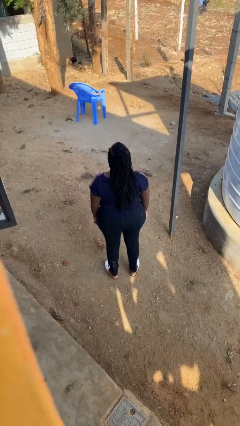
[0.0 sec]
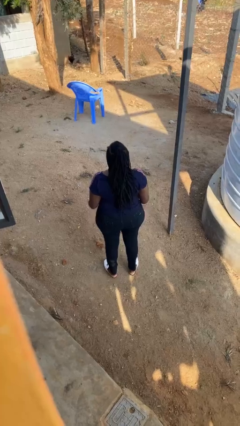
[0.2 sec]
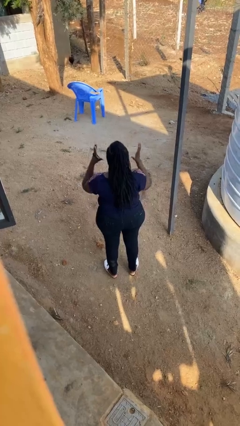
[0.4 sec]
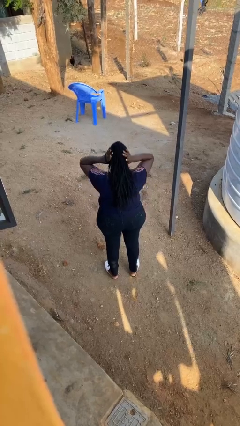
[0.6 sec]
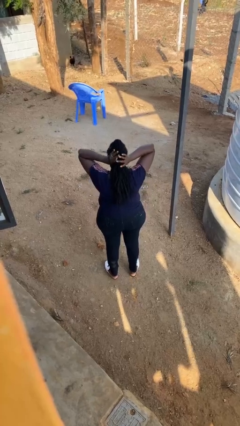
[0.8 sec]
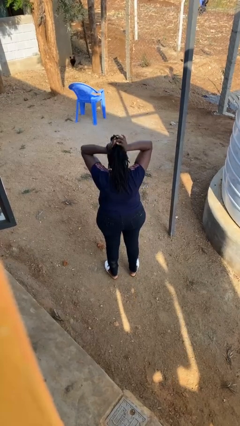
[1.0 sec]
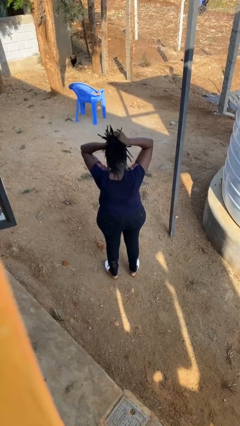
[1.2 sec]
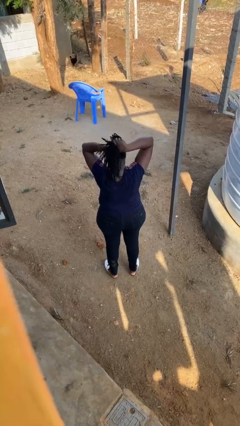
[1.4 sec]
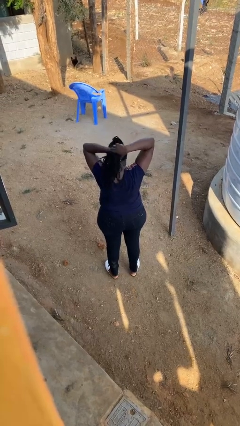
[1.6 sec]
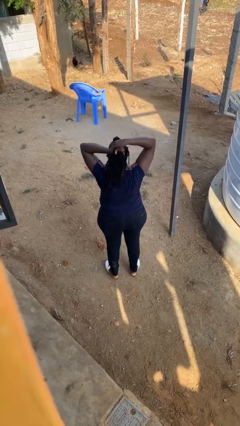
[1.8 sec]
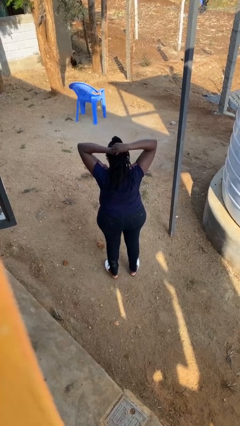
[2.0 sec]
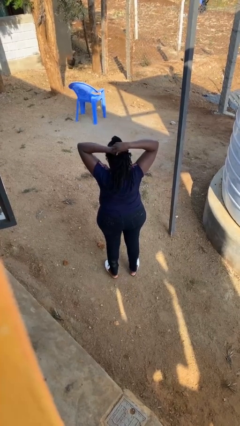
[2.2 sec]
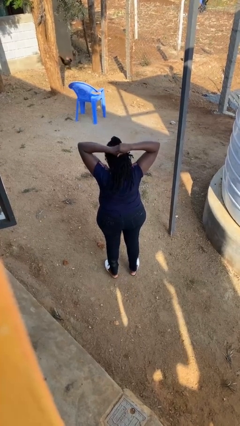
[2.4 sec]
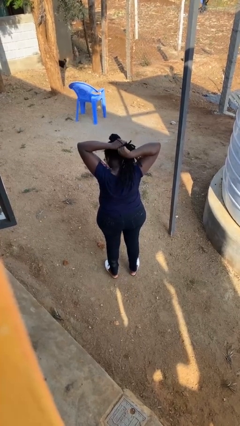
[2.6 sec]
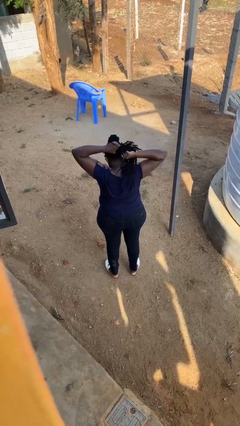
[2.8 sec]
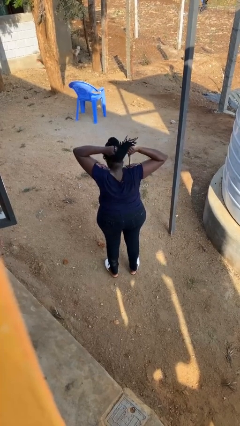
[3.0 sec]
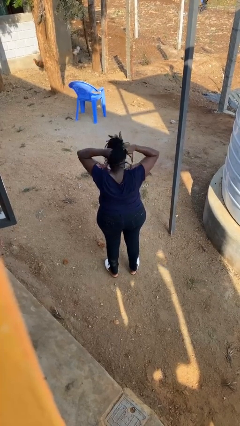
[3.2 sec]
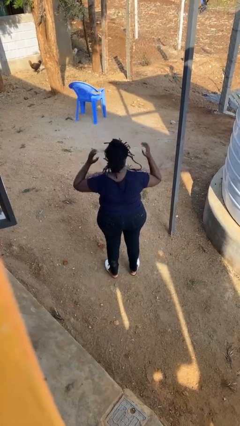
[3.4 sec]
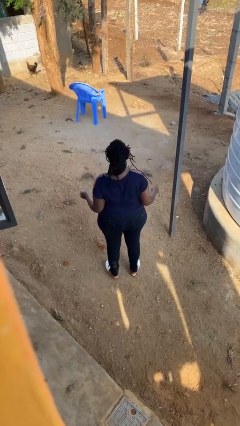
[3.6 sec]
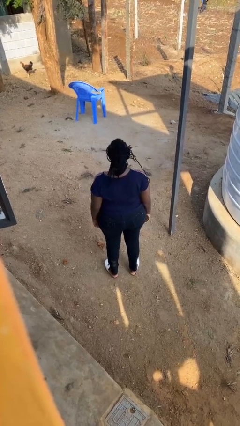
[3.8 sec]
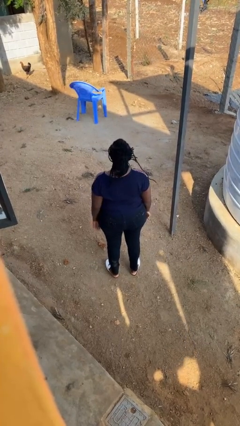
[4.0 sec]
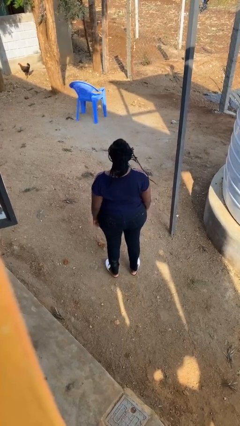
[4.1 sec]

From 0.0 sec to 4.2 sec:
person puts hair in ponytail

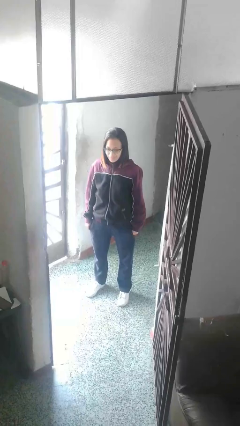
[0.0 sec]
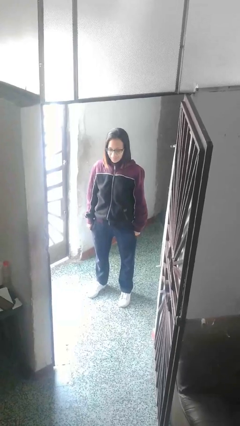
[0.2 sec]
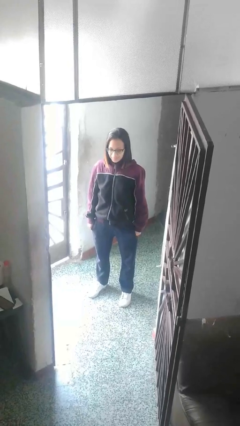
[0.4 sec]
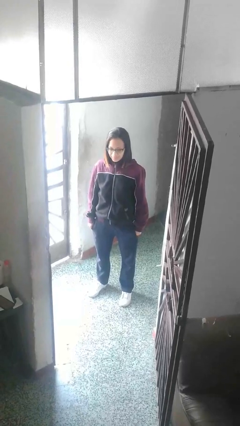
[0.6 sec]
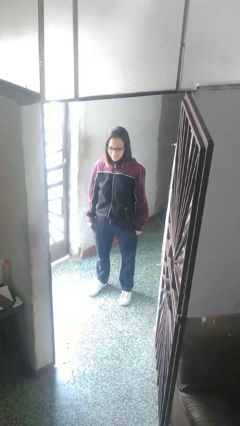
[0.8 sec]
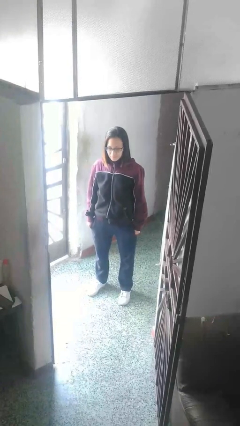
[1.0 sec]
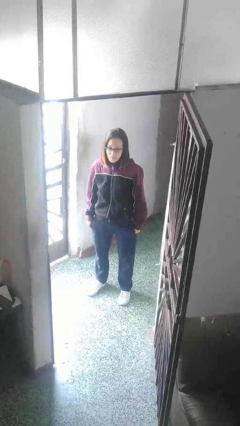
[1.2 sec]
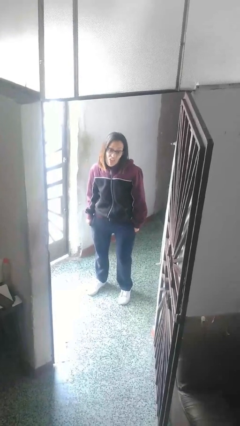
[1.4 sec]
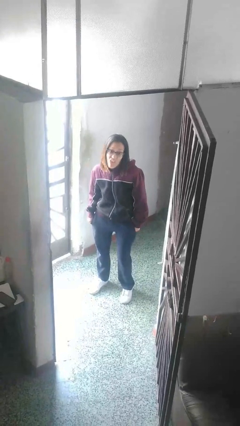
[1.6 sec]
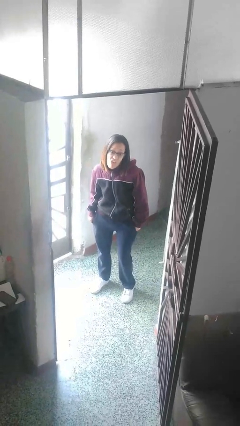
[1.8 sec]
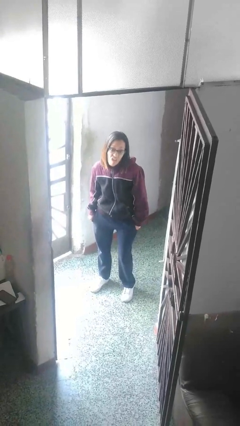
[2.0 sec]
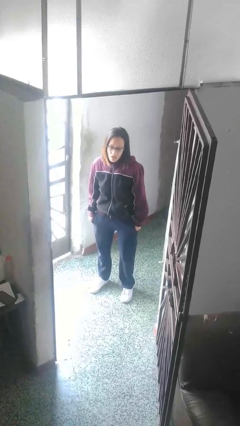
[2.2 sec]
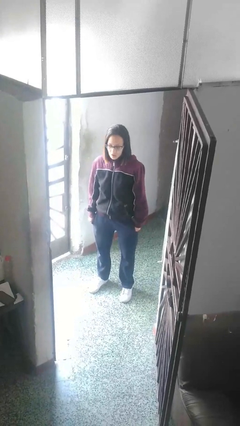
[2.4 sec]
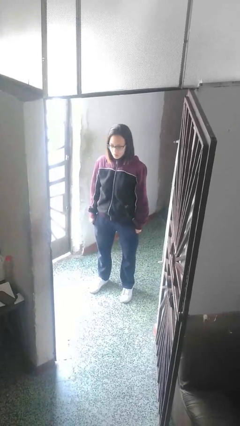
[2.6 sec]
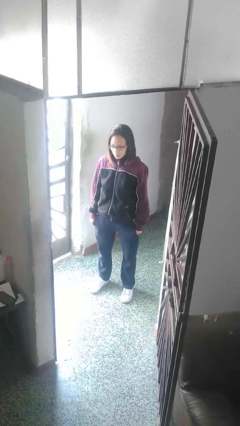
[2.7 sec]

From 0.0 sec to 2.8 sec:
person sticks out tongue

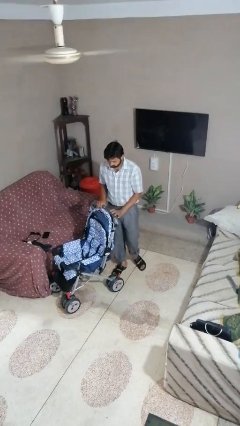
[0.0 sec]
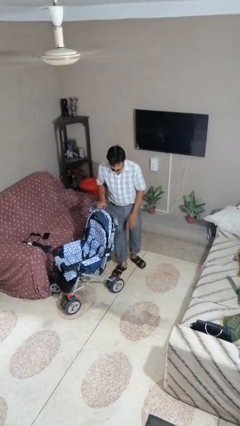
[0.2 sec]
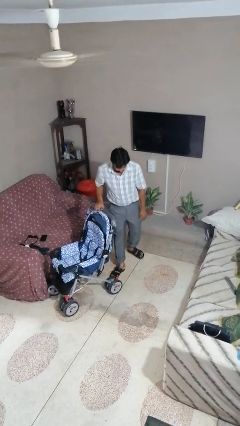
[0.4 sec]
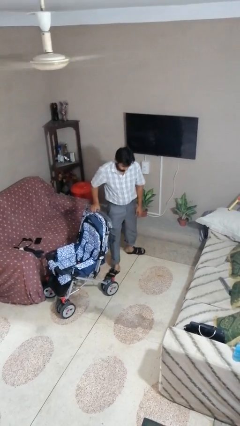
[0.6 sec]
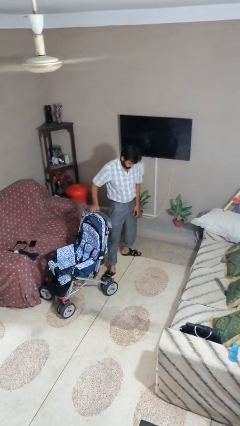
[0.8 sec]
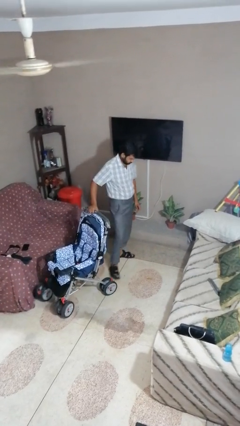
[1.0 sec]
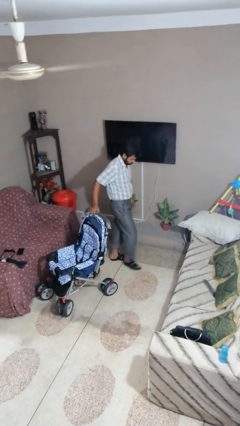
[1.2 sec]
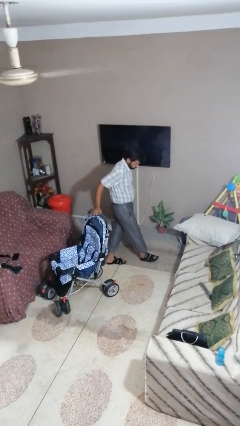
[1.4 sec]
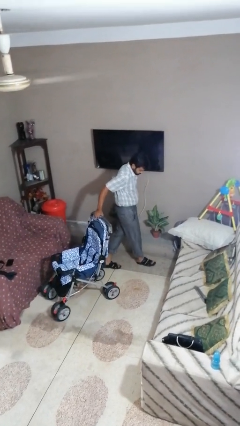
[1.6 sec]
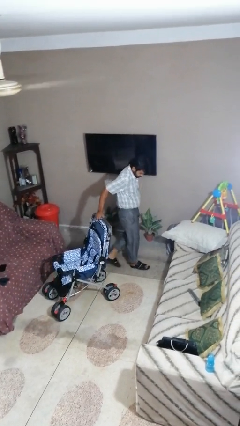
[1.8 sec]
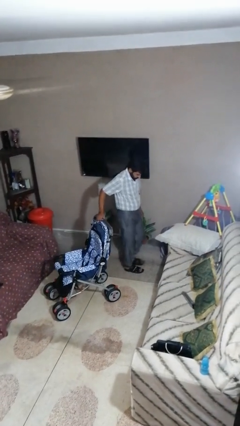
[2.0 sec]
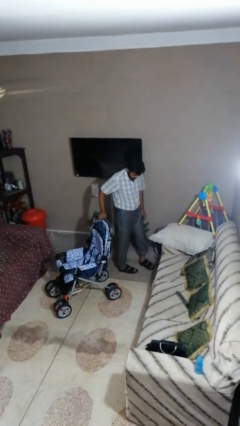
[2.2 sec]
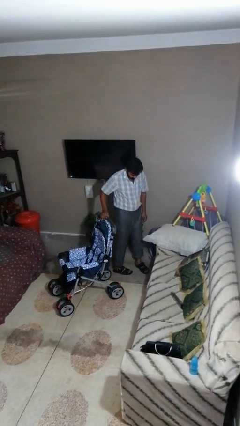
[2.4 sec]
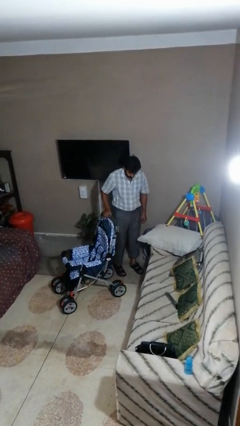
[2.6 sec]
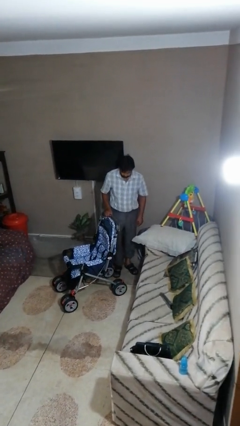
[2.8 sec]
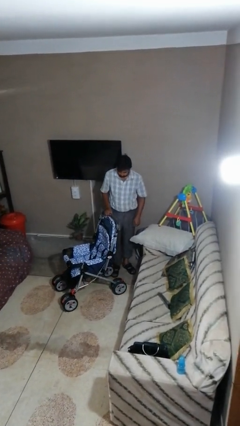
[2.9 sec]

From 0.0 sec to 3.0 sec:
person pulls wheeled cart

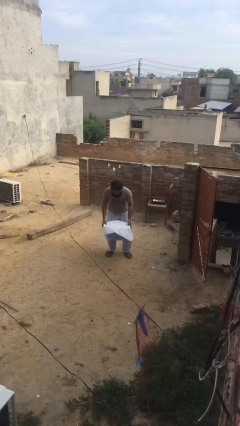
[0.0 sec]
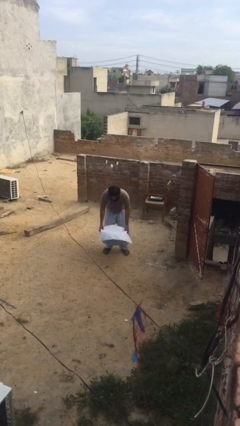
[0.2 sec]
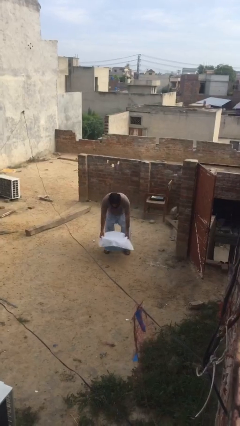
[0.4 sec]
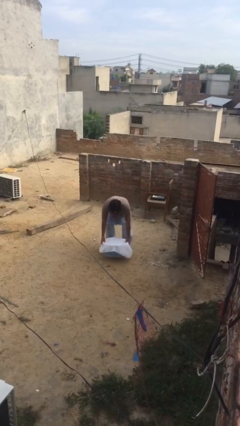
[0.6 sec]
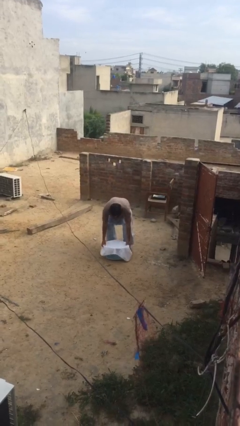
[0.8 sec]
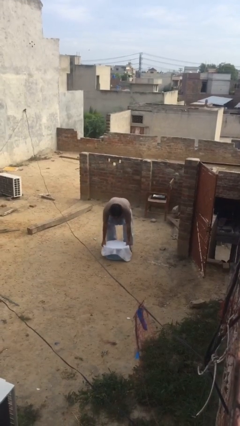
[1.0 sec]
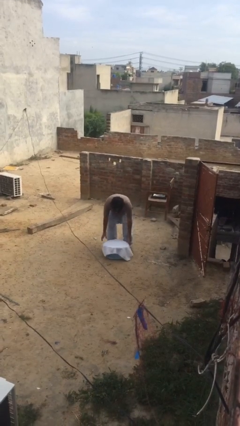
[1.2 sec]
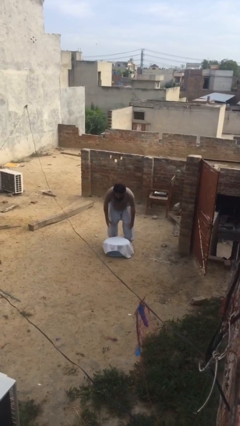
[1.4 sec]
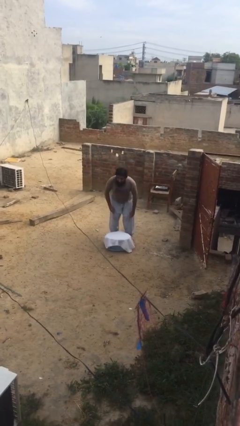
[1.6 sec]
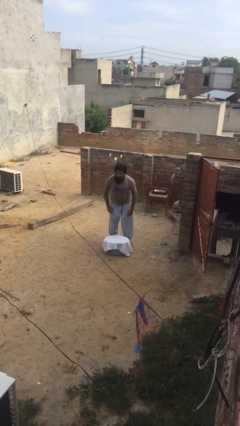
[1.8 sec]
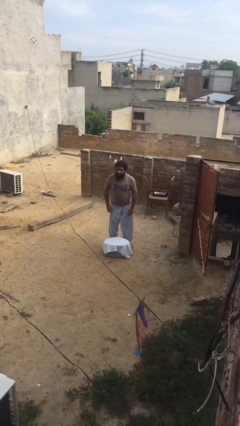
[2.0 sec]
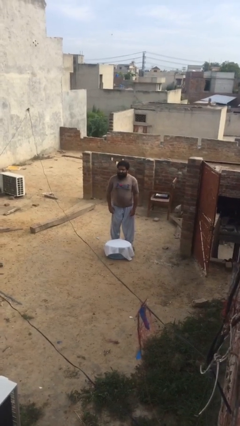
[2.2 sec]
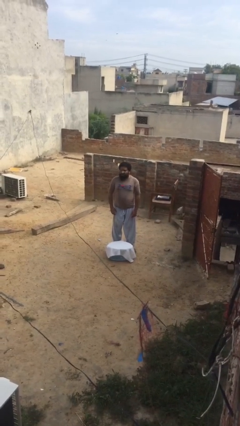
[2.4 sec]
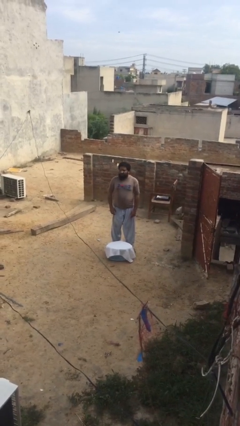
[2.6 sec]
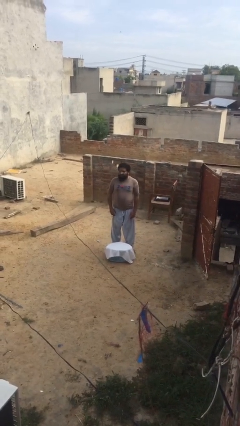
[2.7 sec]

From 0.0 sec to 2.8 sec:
person puts down object on floor

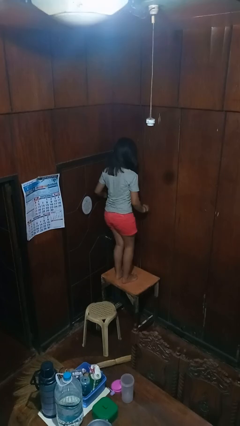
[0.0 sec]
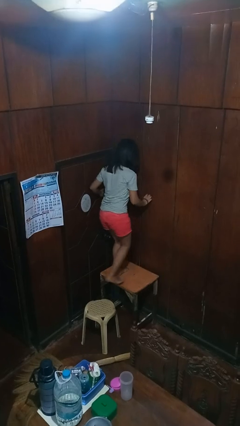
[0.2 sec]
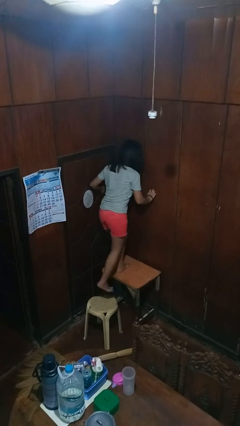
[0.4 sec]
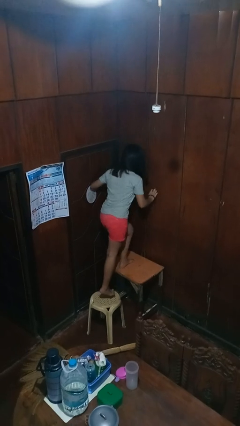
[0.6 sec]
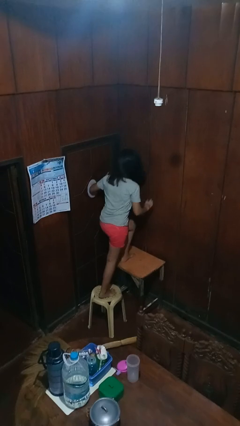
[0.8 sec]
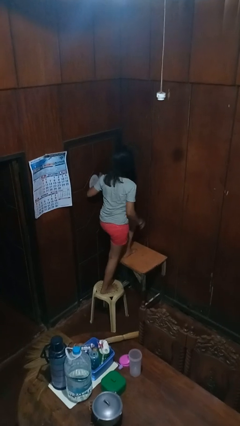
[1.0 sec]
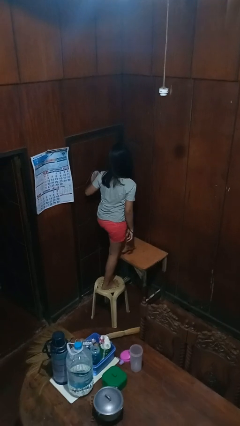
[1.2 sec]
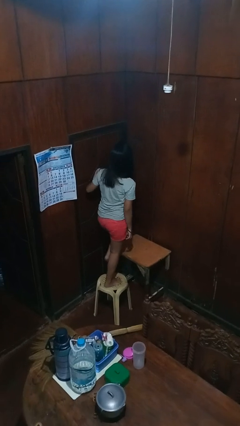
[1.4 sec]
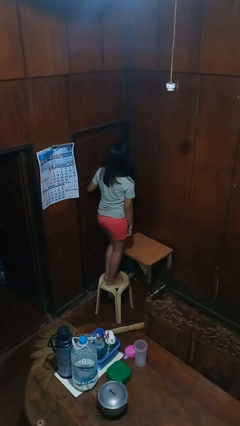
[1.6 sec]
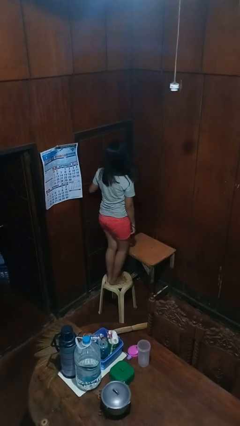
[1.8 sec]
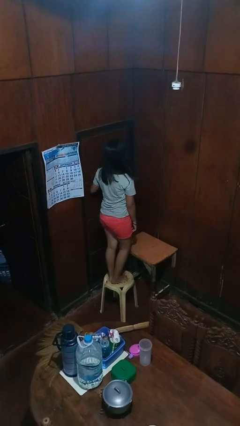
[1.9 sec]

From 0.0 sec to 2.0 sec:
person climbs off table

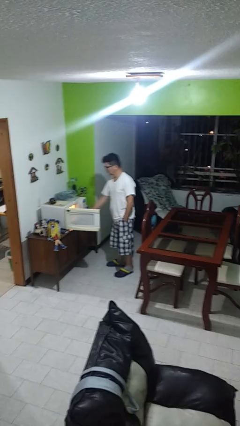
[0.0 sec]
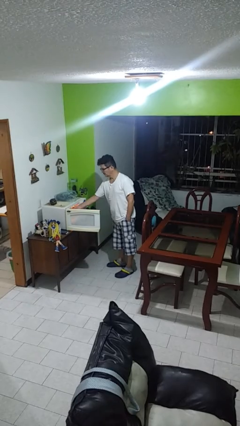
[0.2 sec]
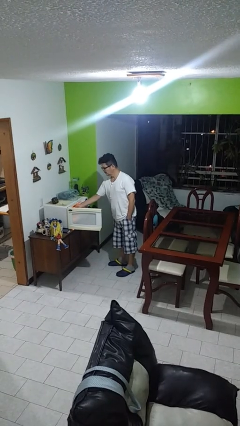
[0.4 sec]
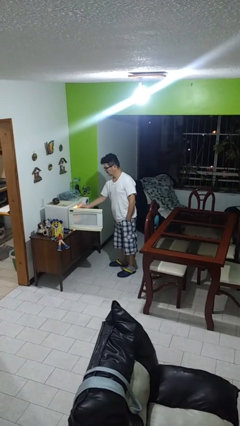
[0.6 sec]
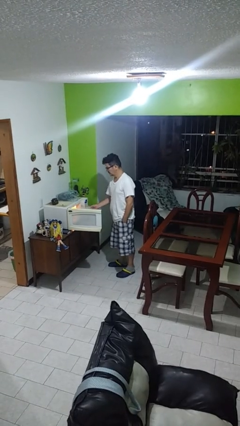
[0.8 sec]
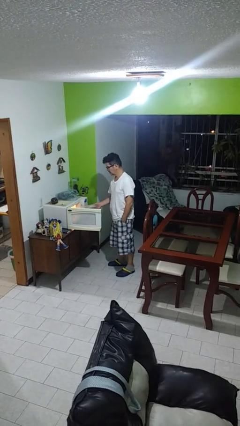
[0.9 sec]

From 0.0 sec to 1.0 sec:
person takes object from microwave

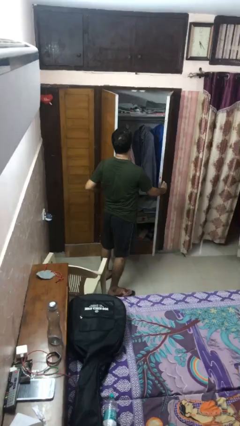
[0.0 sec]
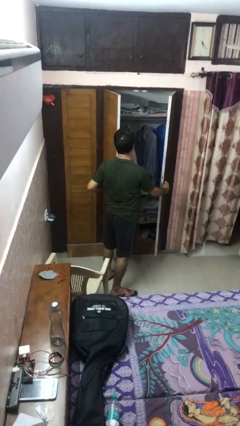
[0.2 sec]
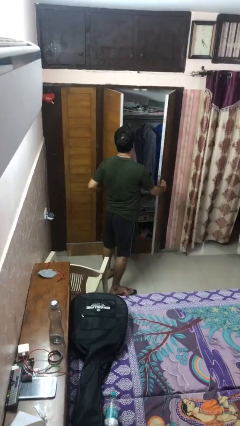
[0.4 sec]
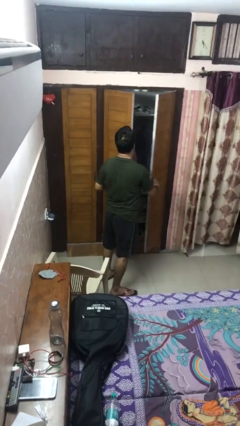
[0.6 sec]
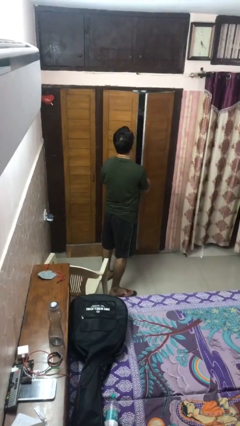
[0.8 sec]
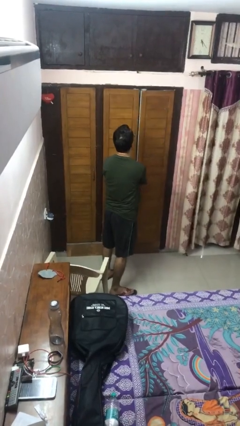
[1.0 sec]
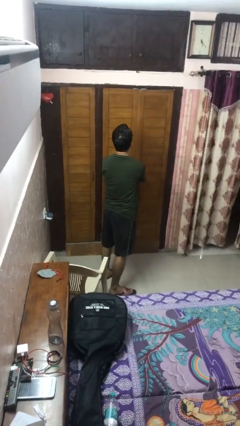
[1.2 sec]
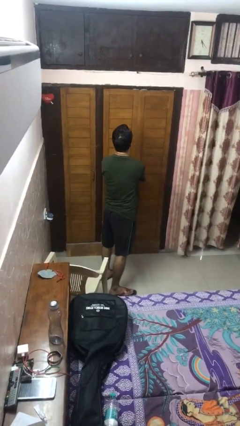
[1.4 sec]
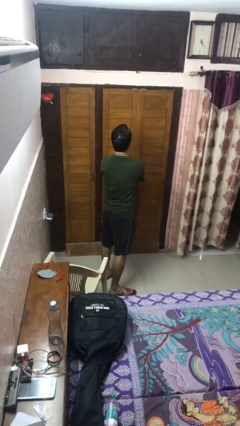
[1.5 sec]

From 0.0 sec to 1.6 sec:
person closes closet door
